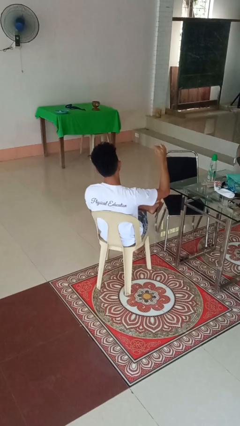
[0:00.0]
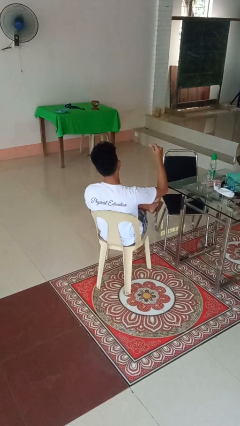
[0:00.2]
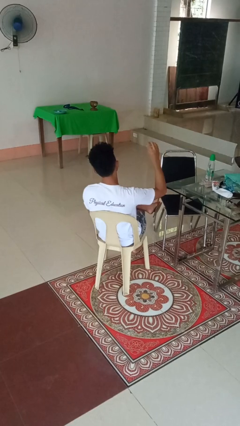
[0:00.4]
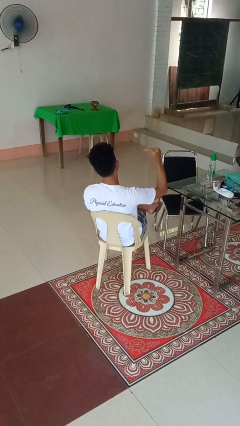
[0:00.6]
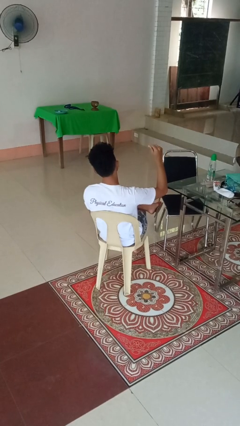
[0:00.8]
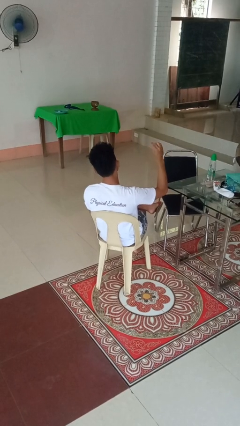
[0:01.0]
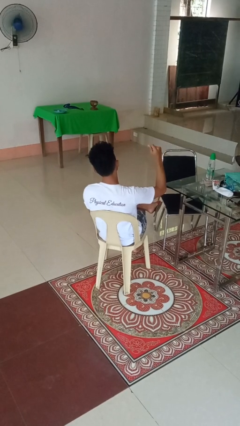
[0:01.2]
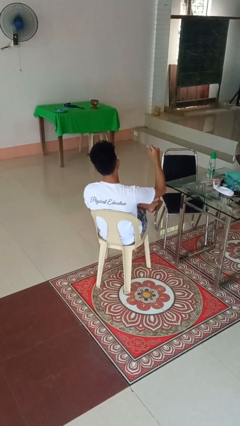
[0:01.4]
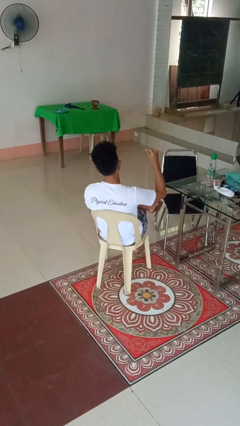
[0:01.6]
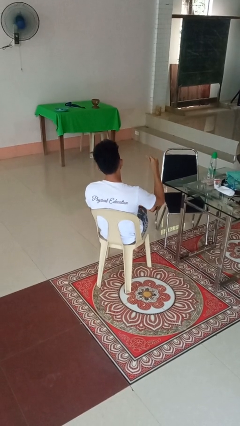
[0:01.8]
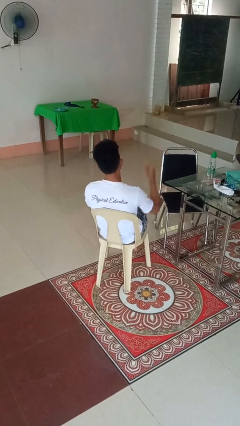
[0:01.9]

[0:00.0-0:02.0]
person snaps fingers

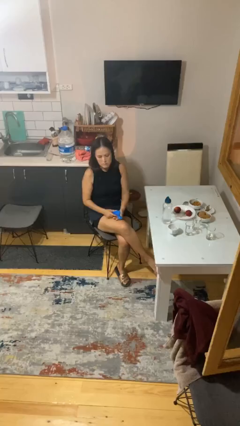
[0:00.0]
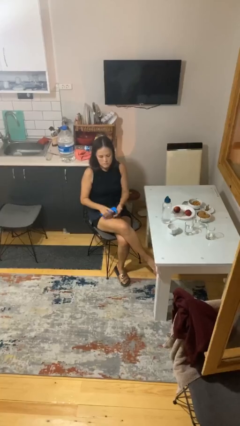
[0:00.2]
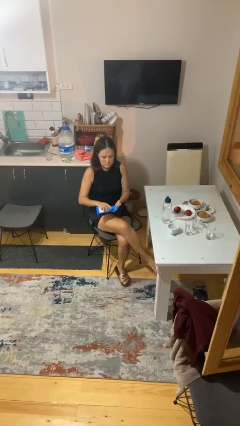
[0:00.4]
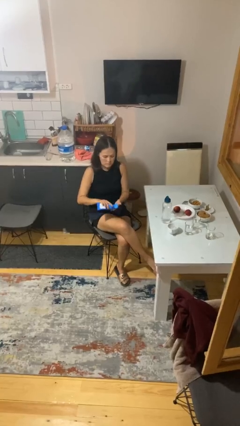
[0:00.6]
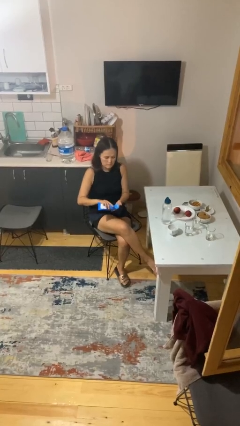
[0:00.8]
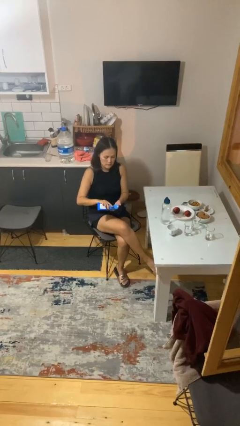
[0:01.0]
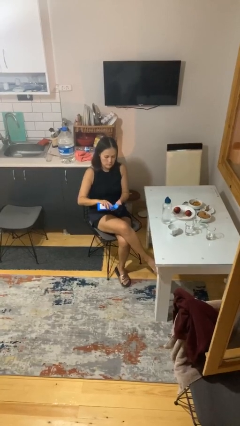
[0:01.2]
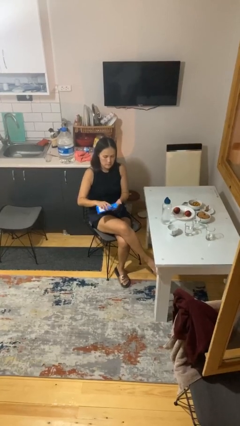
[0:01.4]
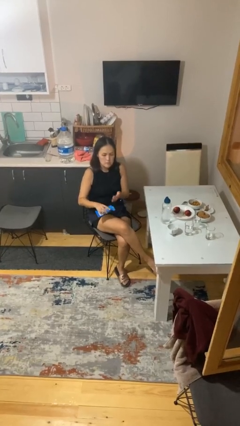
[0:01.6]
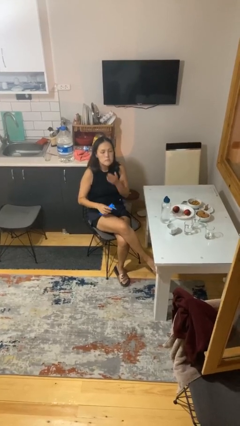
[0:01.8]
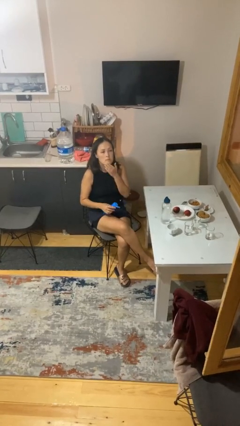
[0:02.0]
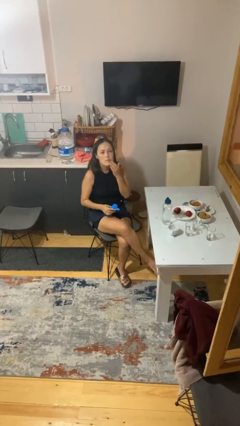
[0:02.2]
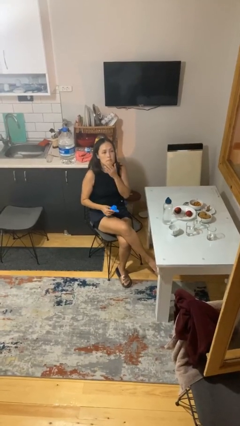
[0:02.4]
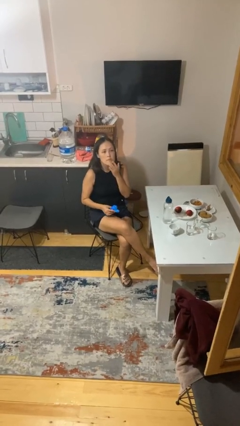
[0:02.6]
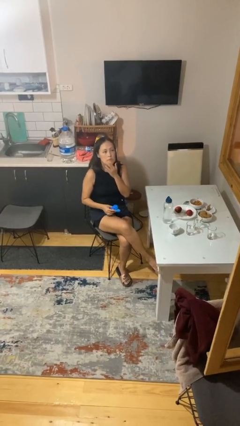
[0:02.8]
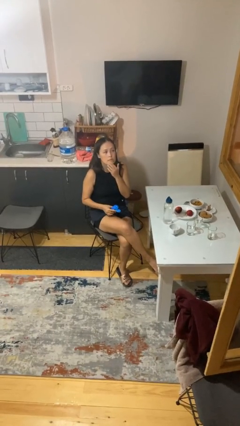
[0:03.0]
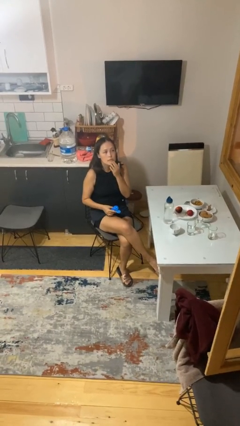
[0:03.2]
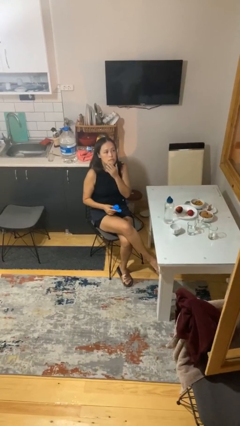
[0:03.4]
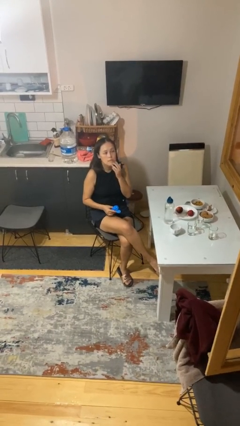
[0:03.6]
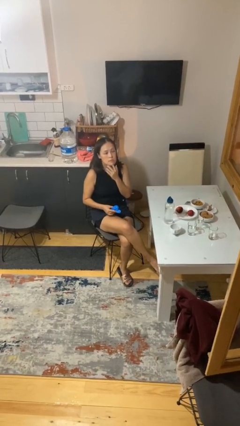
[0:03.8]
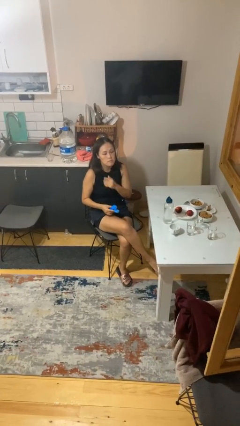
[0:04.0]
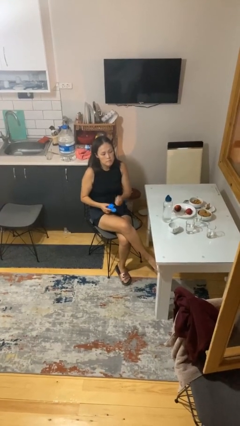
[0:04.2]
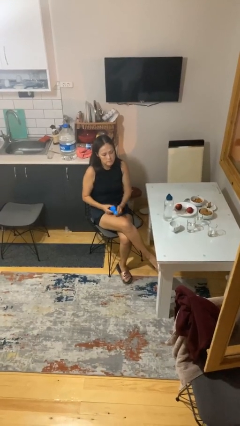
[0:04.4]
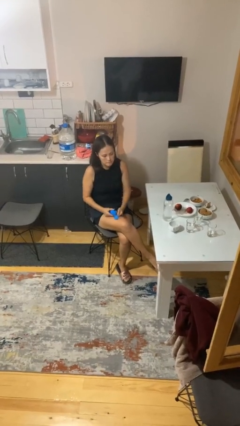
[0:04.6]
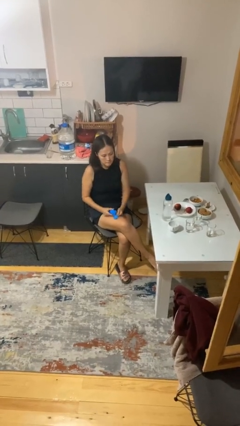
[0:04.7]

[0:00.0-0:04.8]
person applies facial moisturizer

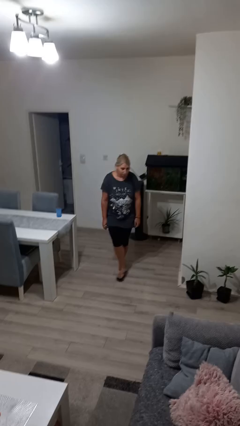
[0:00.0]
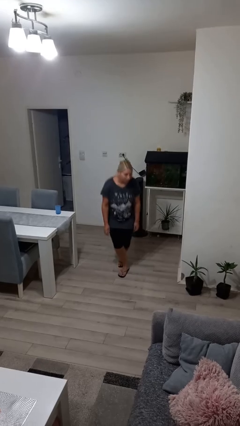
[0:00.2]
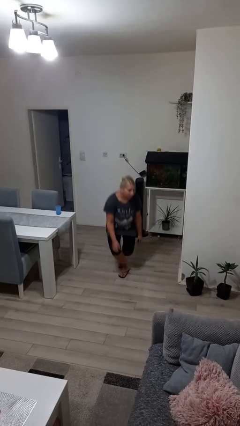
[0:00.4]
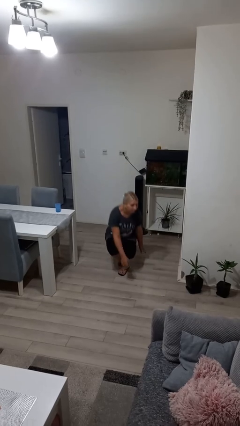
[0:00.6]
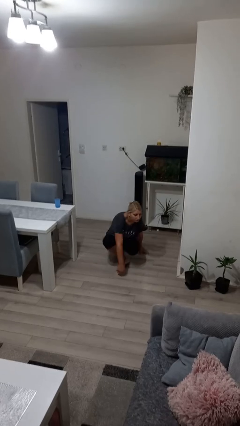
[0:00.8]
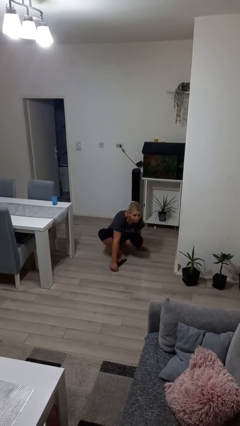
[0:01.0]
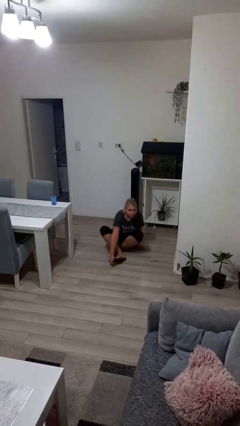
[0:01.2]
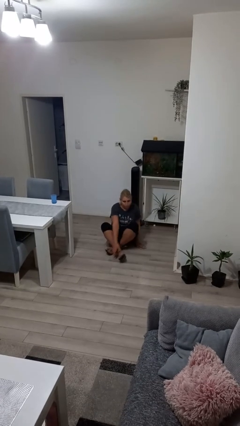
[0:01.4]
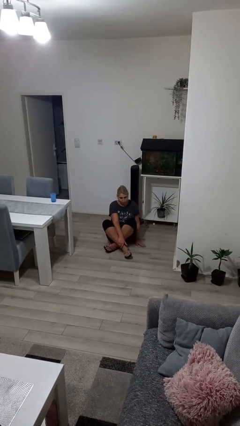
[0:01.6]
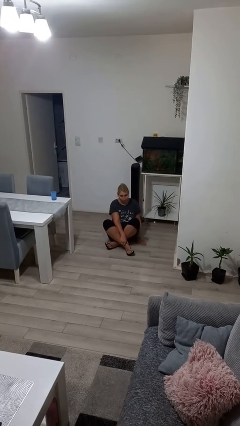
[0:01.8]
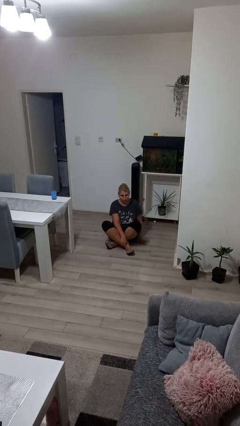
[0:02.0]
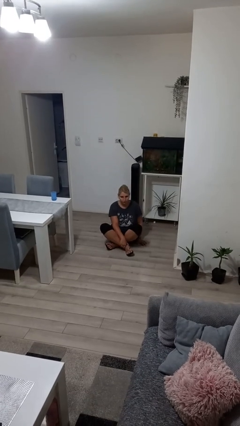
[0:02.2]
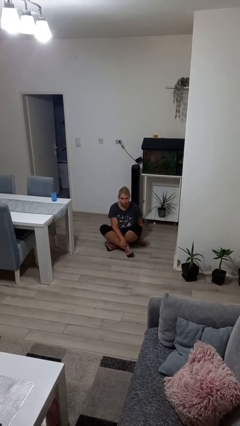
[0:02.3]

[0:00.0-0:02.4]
person sits crisscross

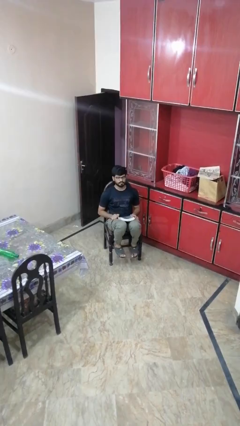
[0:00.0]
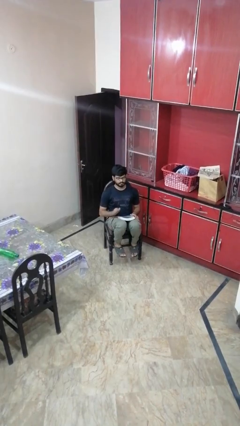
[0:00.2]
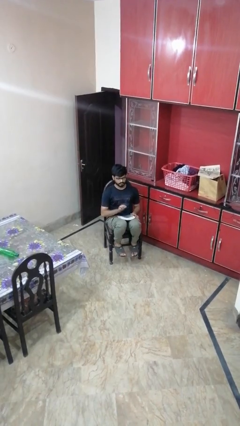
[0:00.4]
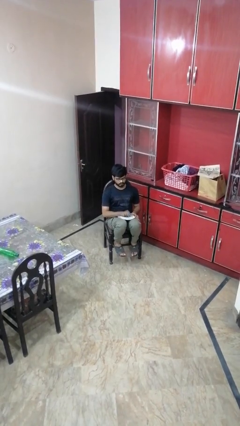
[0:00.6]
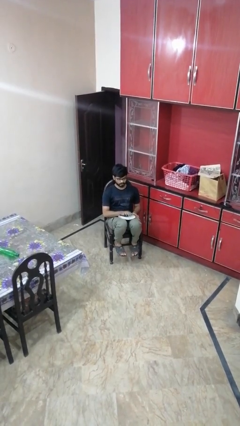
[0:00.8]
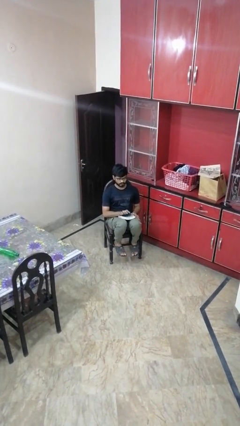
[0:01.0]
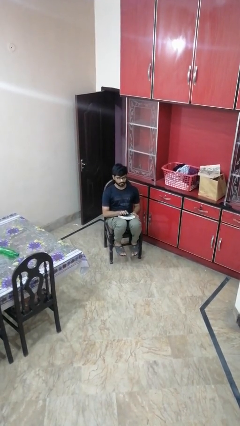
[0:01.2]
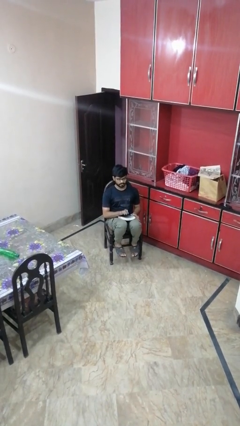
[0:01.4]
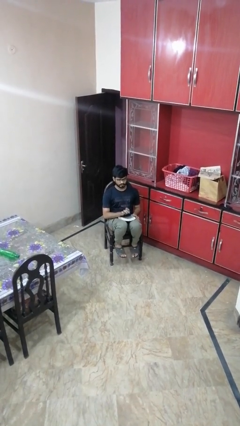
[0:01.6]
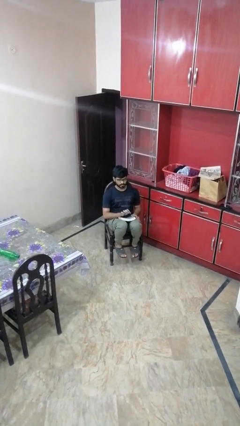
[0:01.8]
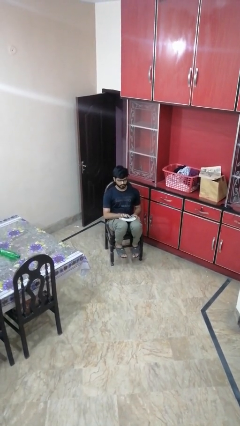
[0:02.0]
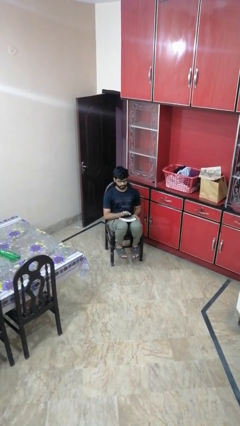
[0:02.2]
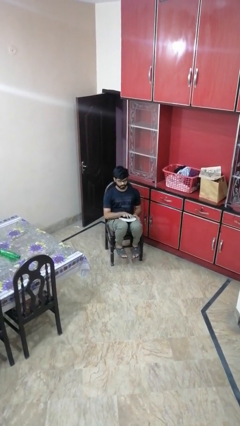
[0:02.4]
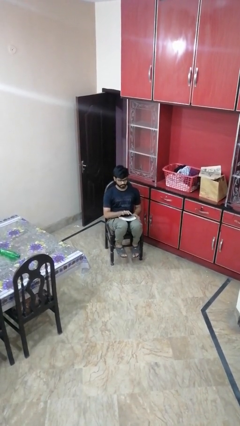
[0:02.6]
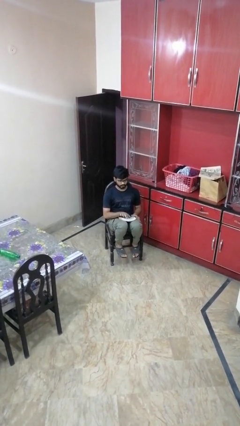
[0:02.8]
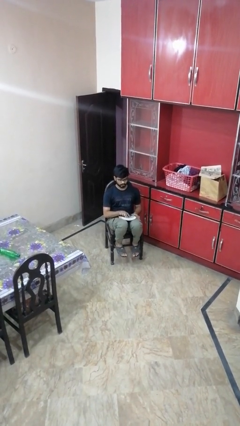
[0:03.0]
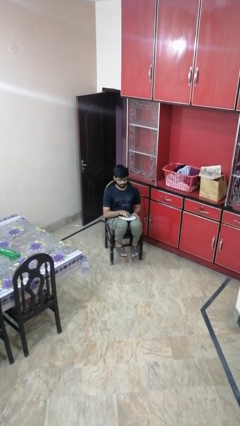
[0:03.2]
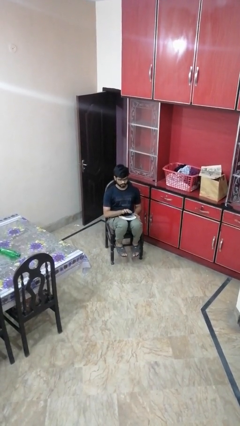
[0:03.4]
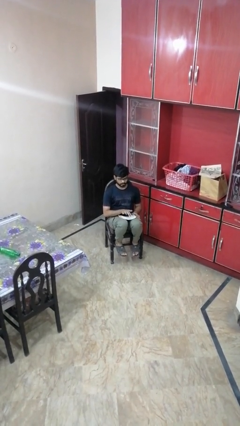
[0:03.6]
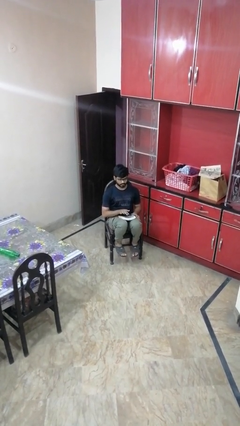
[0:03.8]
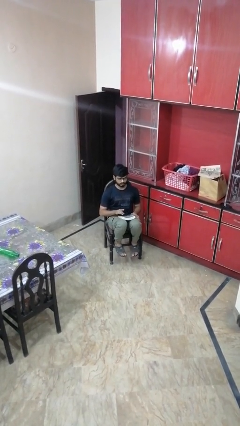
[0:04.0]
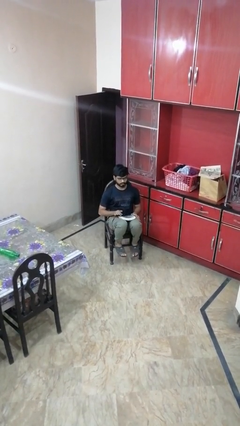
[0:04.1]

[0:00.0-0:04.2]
person taps object with finger

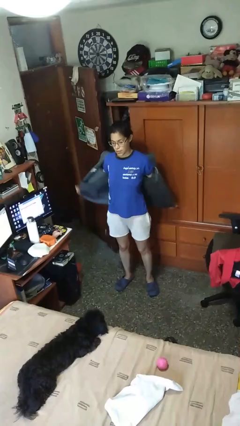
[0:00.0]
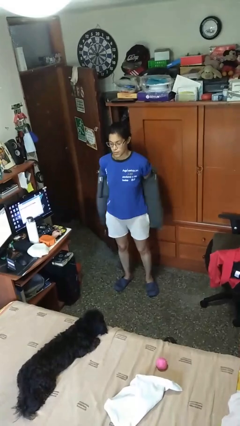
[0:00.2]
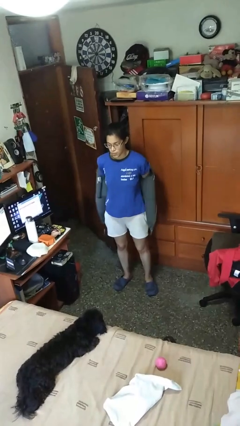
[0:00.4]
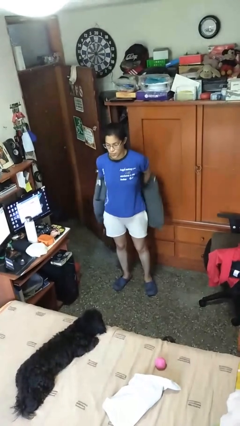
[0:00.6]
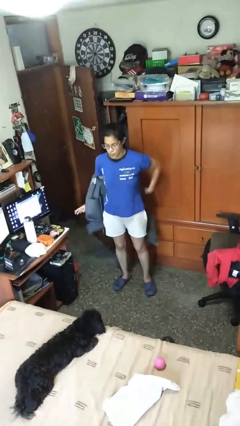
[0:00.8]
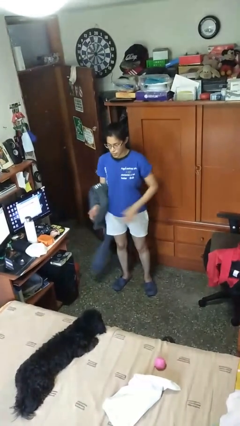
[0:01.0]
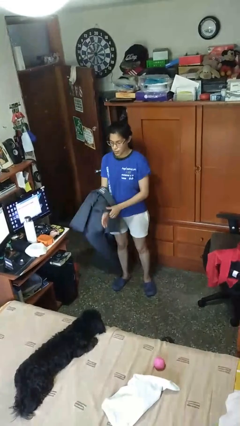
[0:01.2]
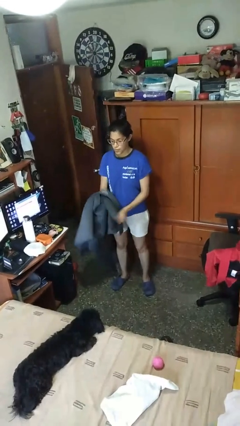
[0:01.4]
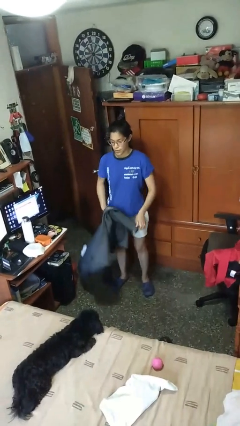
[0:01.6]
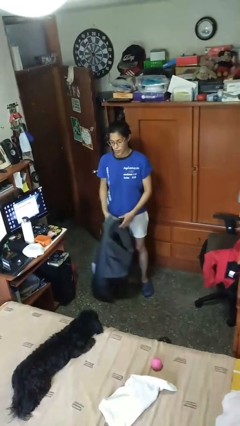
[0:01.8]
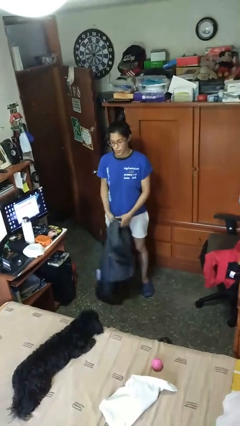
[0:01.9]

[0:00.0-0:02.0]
person takes off jacket

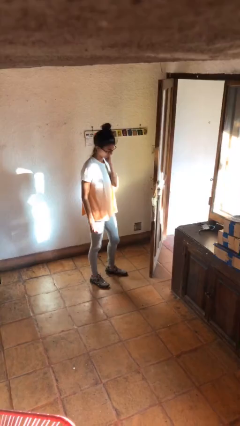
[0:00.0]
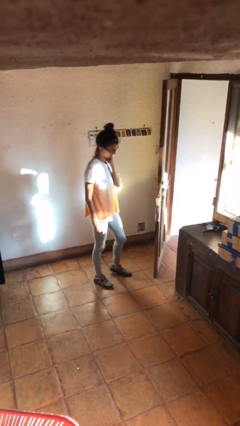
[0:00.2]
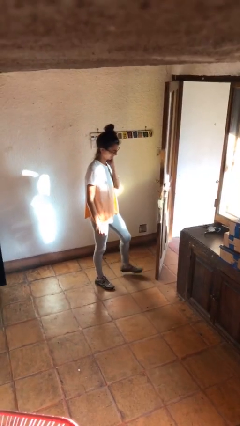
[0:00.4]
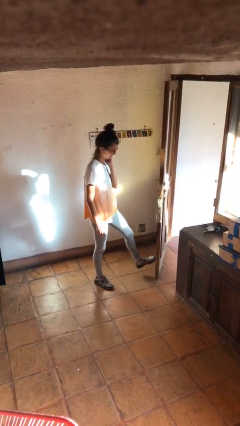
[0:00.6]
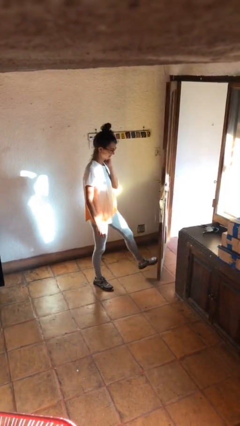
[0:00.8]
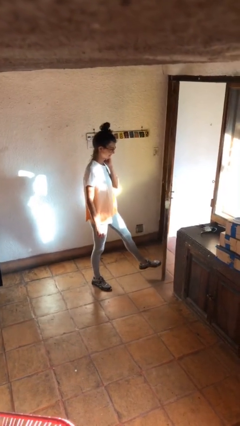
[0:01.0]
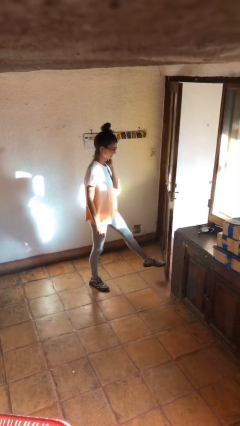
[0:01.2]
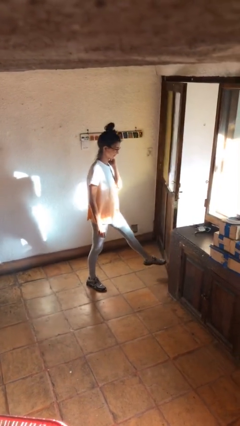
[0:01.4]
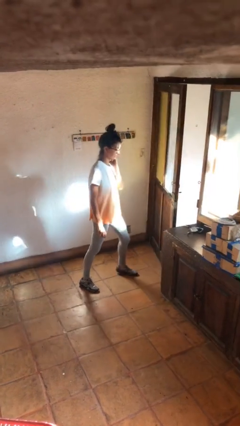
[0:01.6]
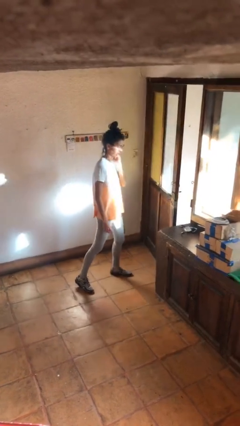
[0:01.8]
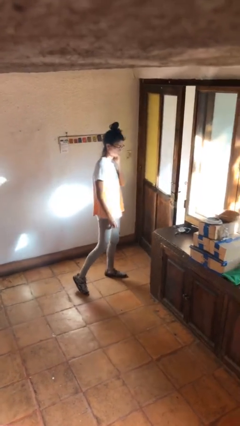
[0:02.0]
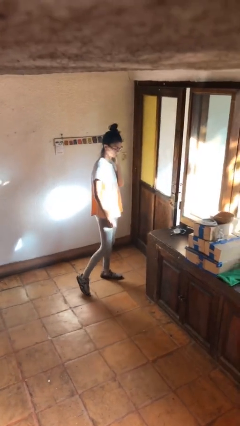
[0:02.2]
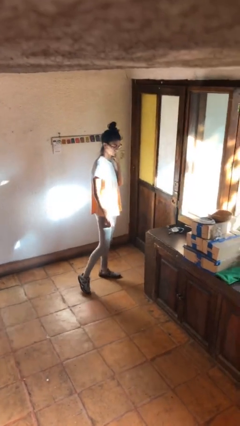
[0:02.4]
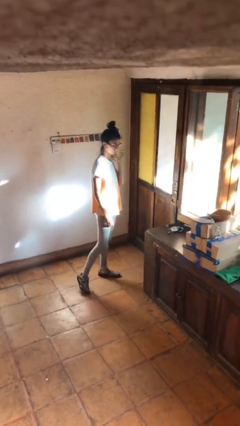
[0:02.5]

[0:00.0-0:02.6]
person closes door with foot
